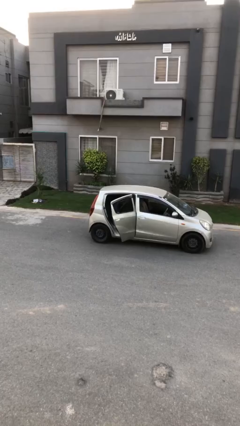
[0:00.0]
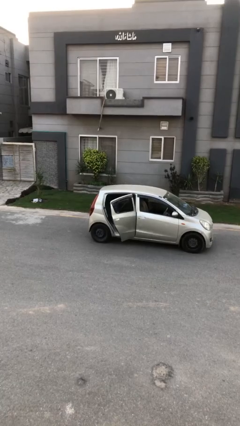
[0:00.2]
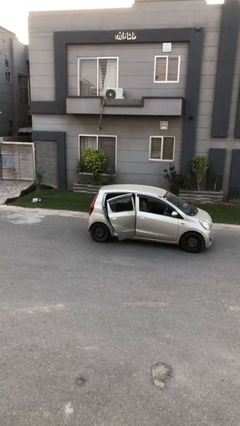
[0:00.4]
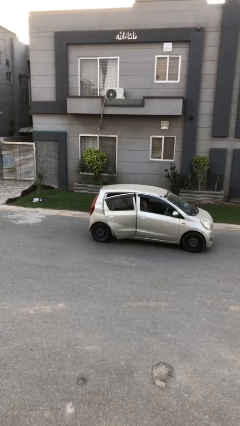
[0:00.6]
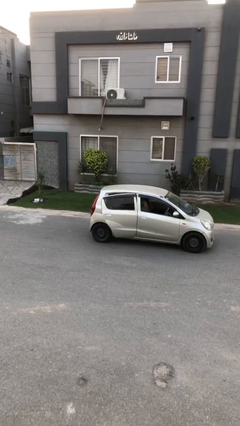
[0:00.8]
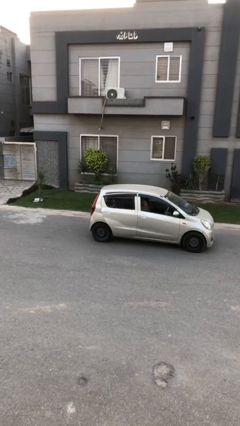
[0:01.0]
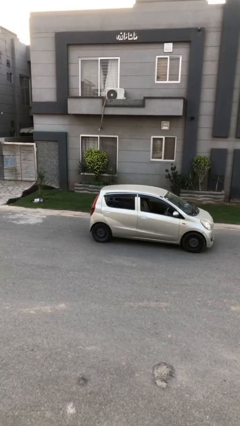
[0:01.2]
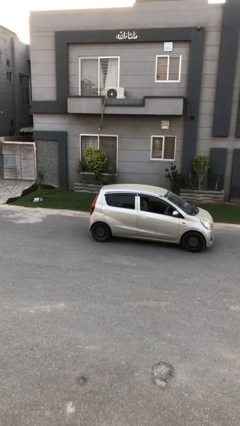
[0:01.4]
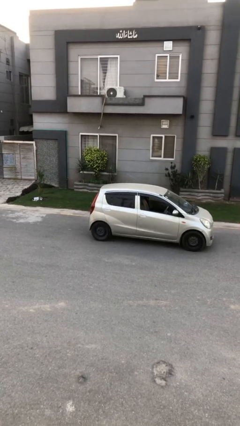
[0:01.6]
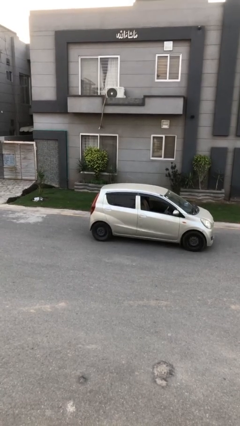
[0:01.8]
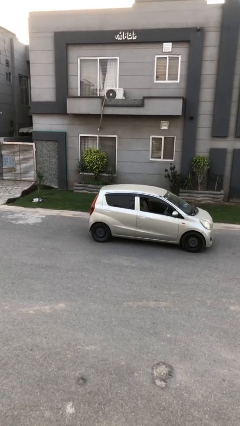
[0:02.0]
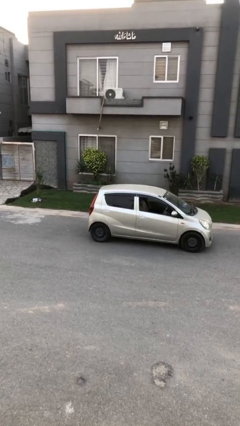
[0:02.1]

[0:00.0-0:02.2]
person closes car door

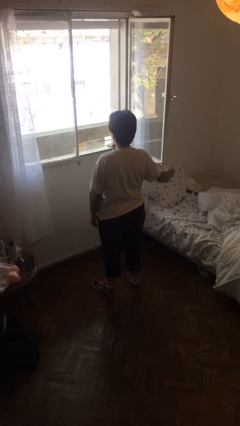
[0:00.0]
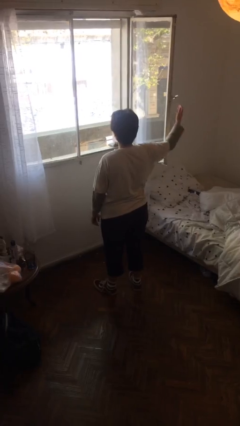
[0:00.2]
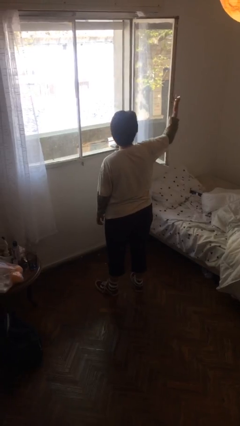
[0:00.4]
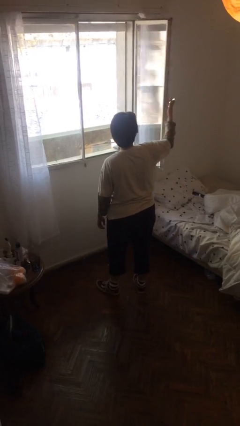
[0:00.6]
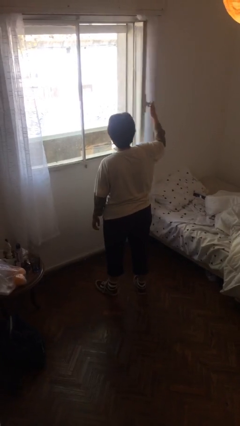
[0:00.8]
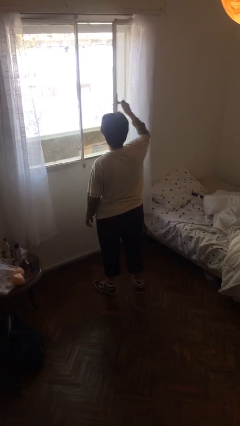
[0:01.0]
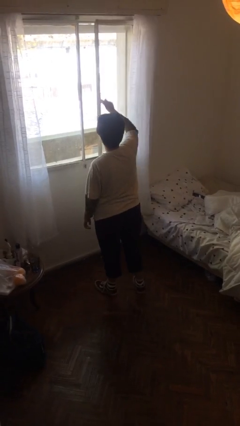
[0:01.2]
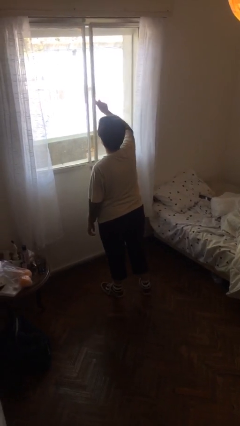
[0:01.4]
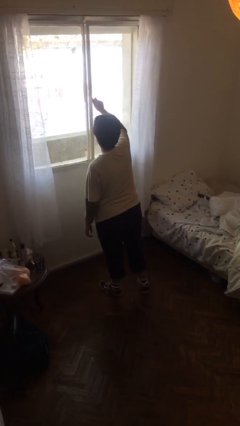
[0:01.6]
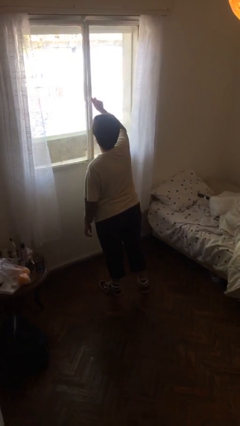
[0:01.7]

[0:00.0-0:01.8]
person closes home window

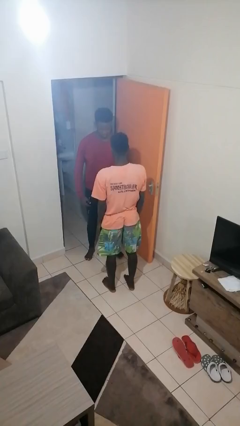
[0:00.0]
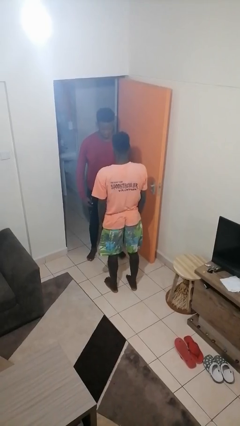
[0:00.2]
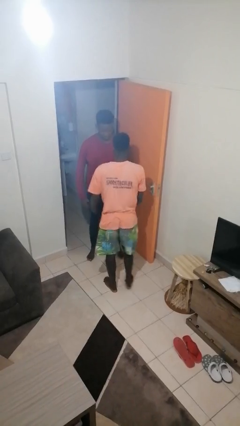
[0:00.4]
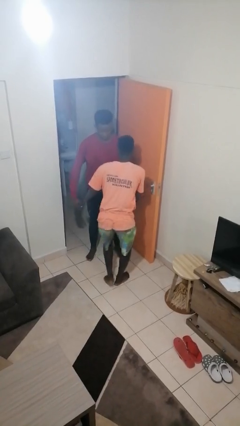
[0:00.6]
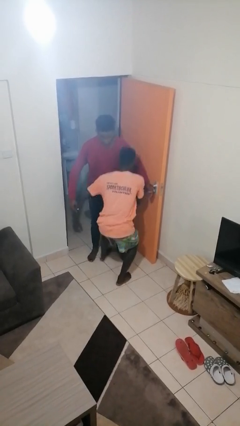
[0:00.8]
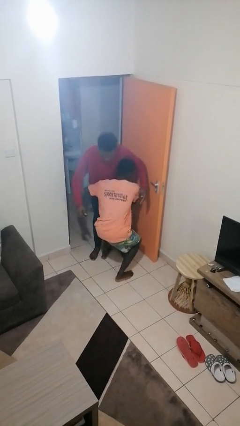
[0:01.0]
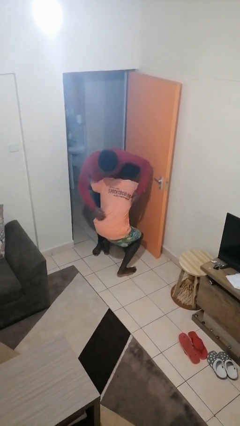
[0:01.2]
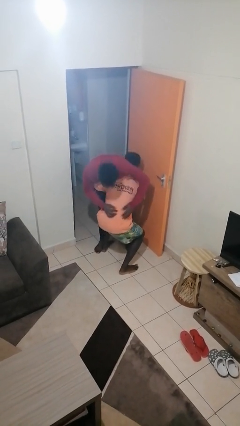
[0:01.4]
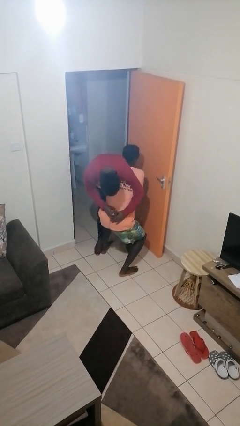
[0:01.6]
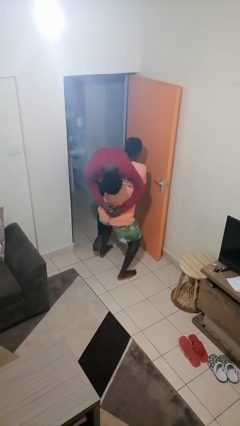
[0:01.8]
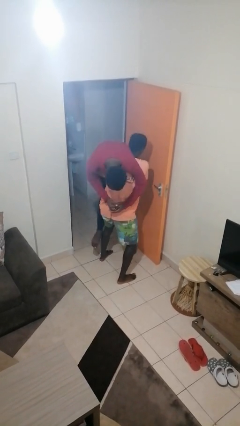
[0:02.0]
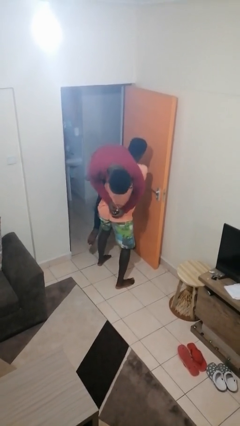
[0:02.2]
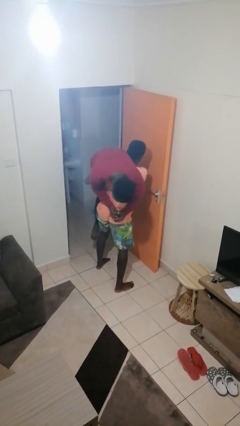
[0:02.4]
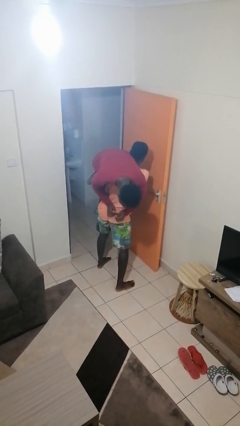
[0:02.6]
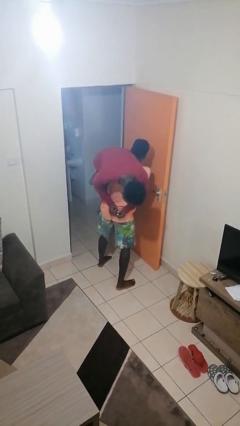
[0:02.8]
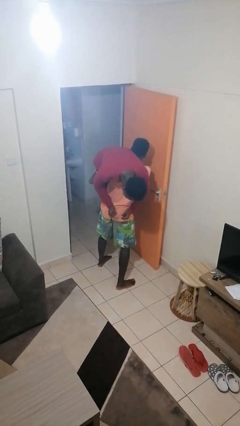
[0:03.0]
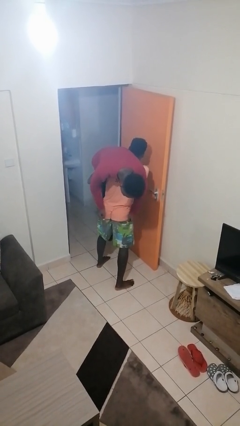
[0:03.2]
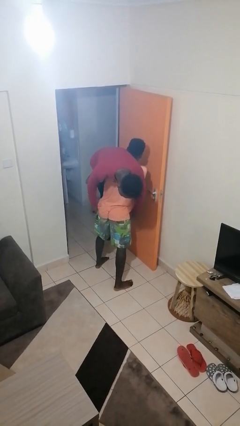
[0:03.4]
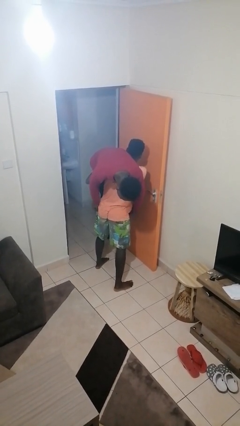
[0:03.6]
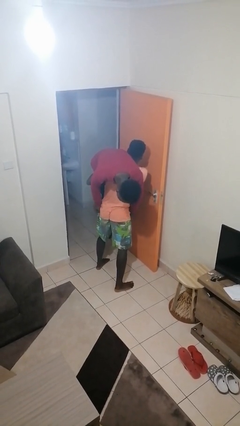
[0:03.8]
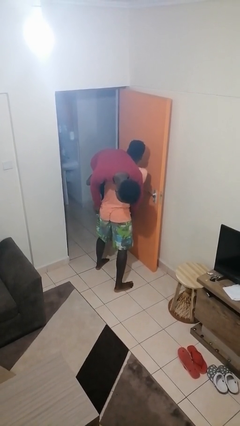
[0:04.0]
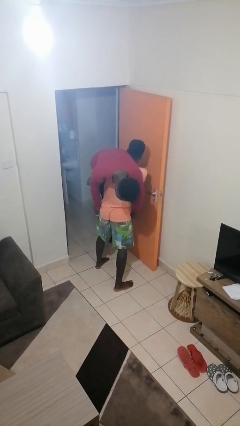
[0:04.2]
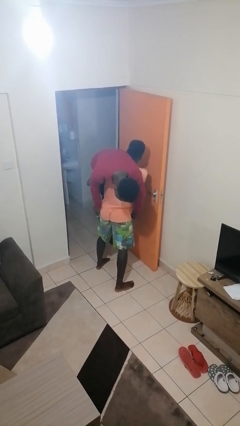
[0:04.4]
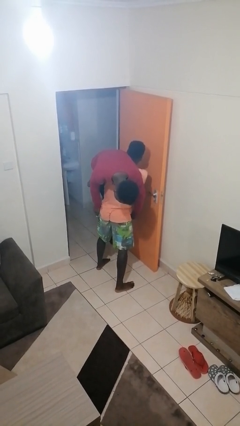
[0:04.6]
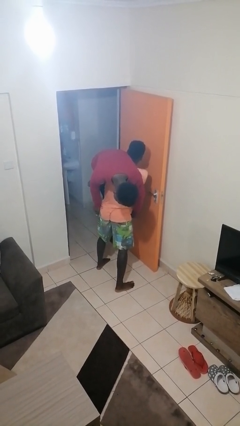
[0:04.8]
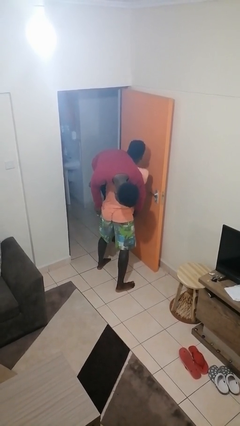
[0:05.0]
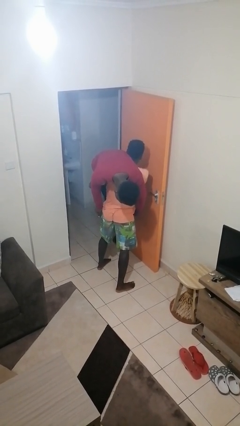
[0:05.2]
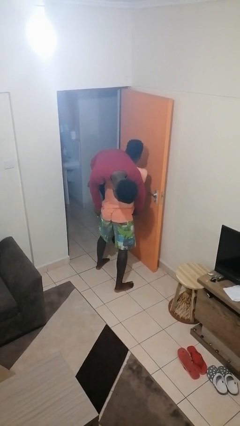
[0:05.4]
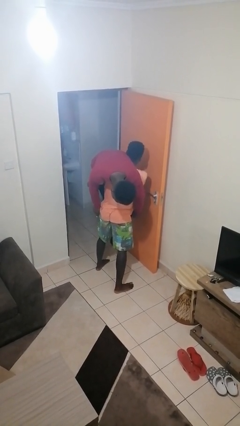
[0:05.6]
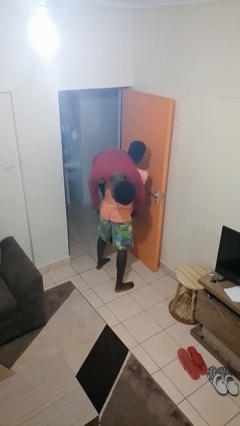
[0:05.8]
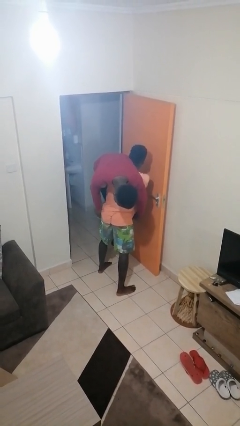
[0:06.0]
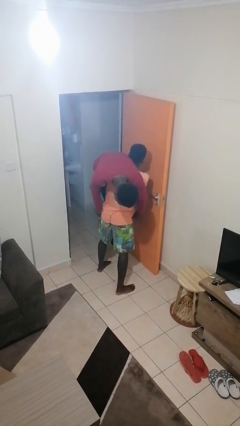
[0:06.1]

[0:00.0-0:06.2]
person carries person over shoulder

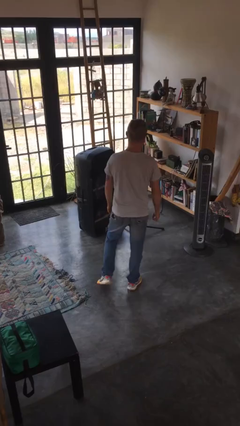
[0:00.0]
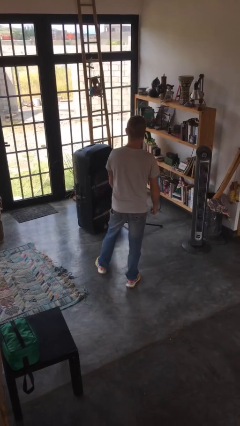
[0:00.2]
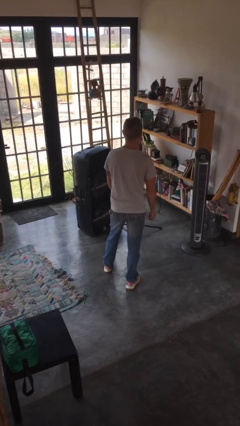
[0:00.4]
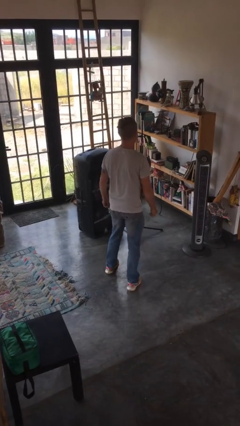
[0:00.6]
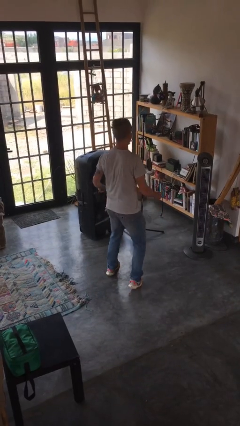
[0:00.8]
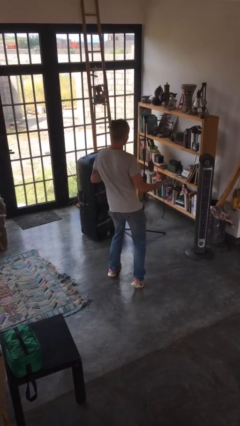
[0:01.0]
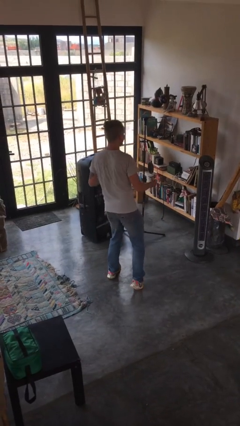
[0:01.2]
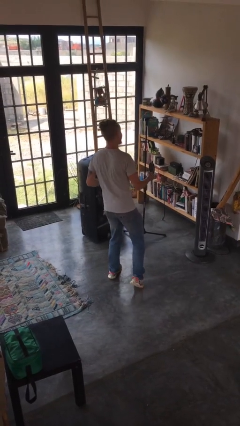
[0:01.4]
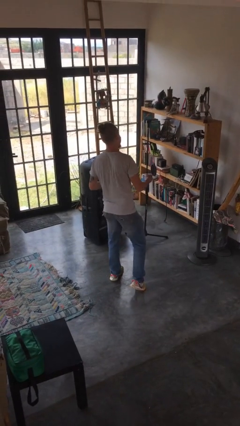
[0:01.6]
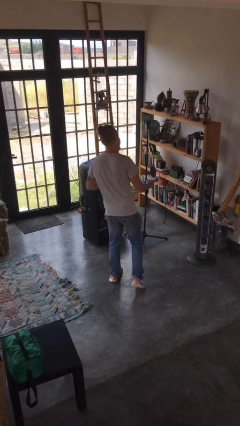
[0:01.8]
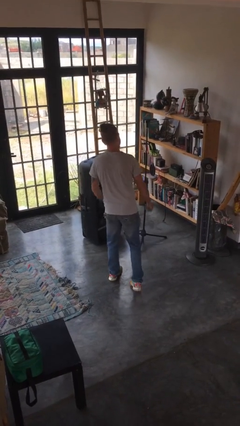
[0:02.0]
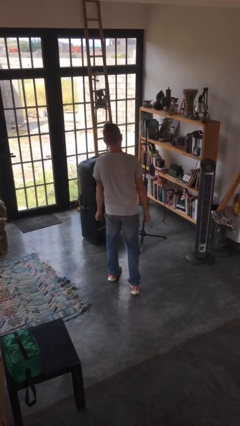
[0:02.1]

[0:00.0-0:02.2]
person wiggles hips

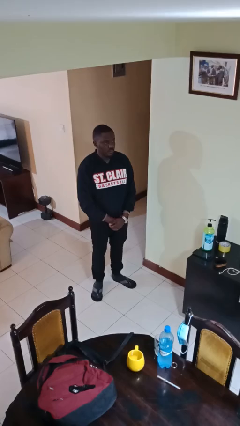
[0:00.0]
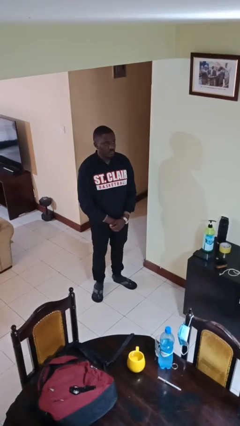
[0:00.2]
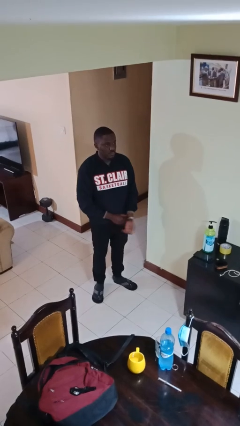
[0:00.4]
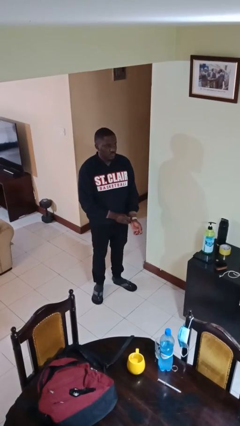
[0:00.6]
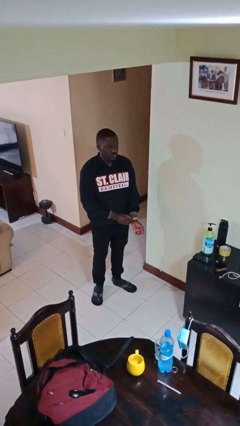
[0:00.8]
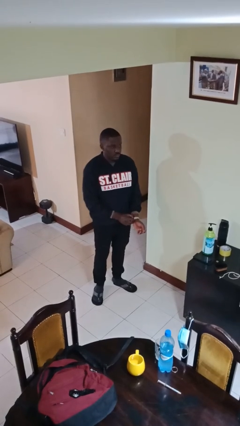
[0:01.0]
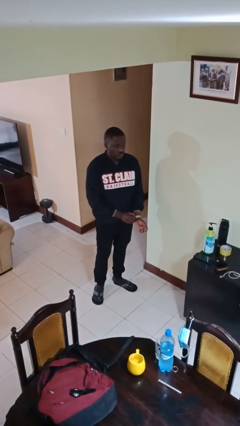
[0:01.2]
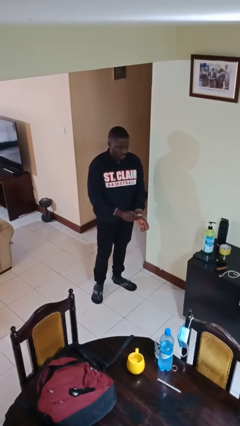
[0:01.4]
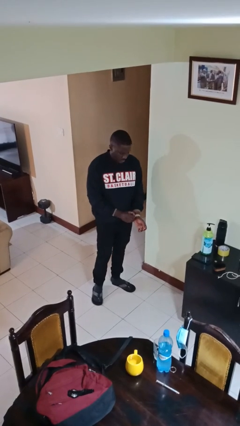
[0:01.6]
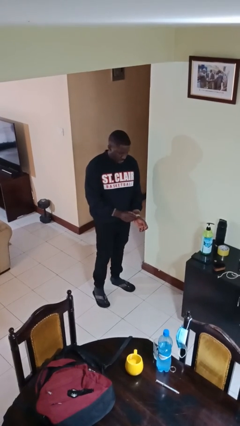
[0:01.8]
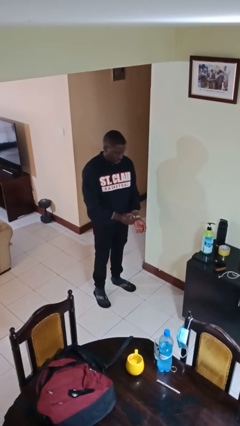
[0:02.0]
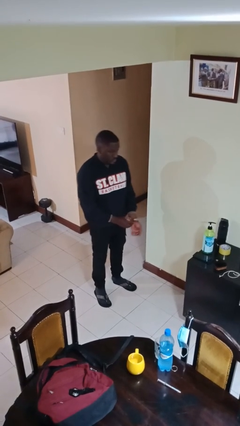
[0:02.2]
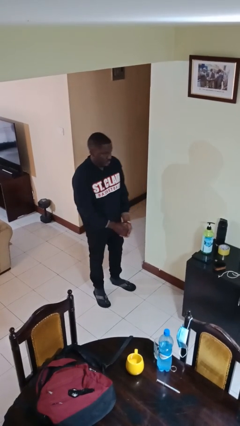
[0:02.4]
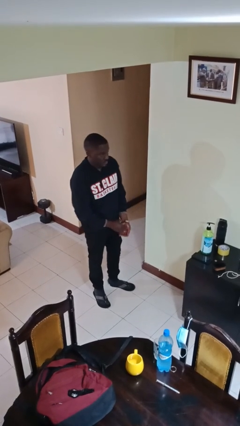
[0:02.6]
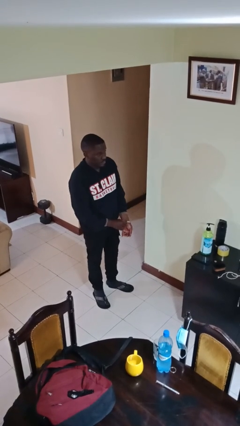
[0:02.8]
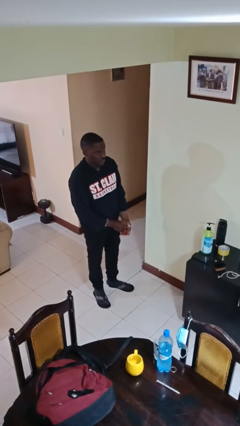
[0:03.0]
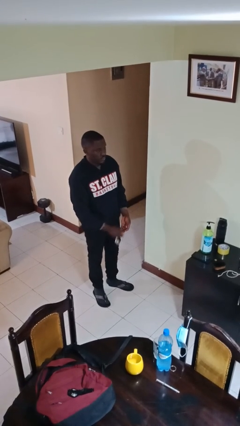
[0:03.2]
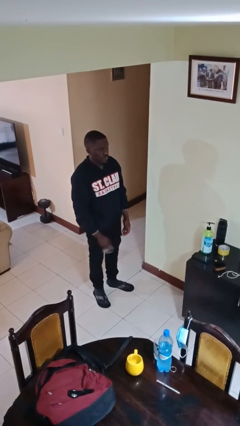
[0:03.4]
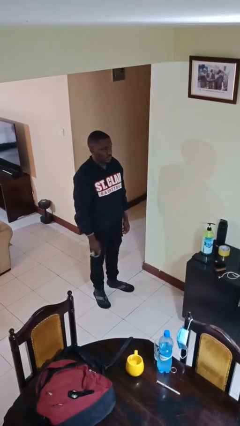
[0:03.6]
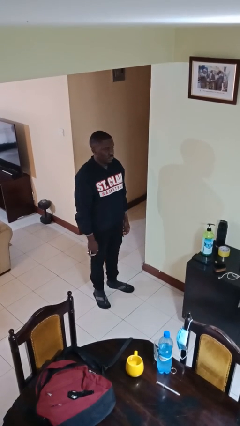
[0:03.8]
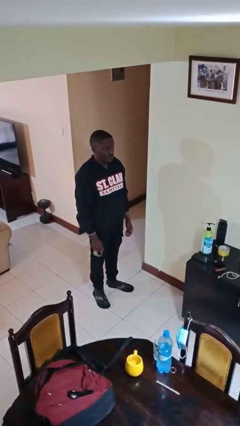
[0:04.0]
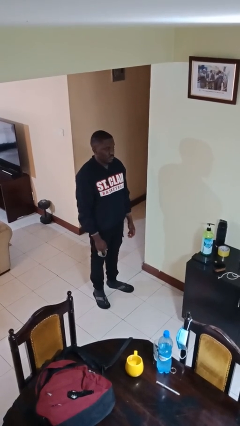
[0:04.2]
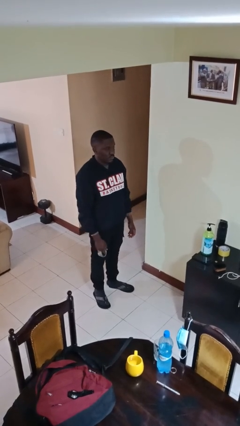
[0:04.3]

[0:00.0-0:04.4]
person takes off wristwatch

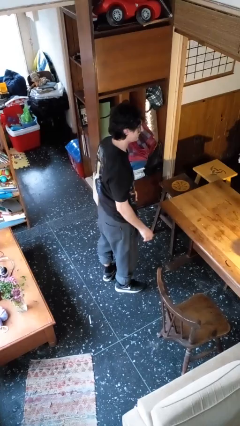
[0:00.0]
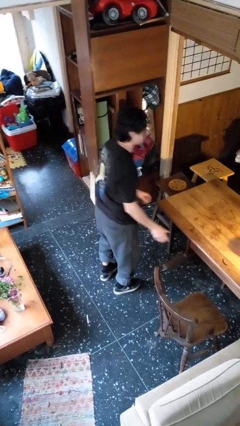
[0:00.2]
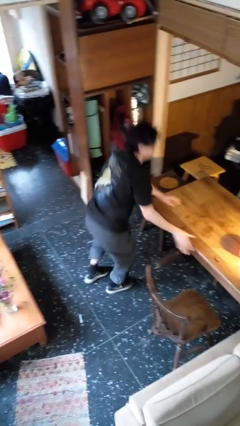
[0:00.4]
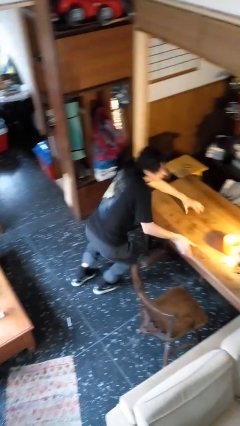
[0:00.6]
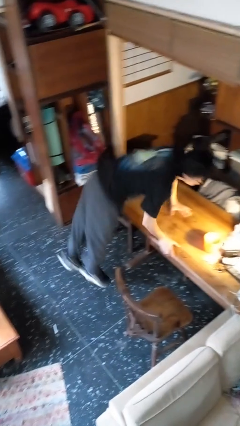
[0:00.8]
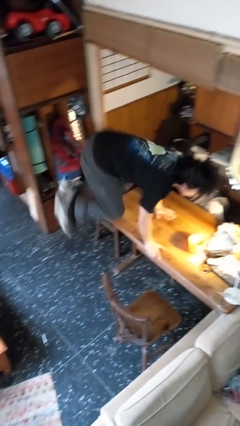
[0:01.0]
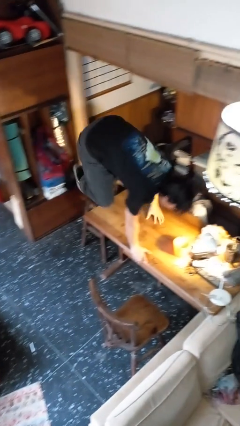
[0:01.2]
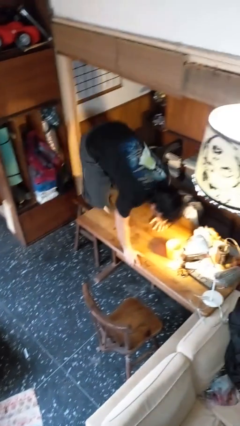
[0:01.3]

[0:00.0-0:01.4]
person climbs on table
